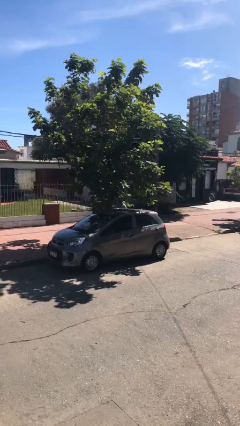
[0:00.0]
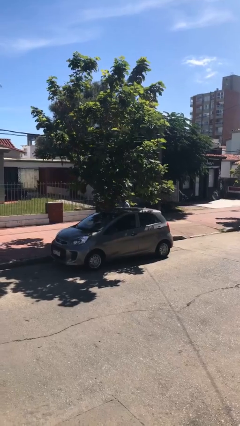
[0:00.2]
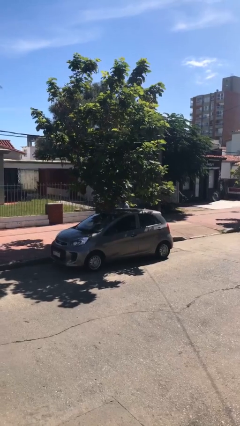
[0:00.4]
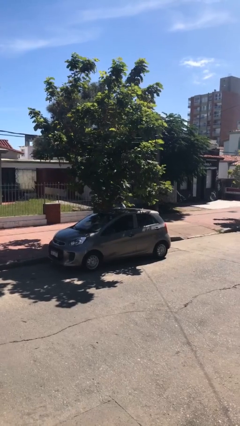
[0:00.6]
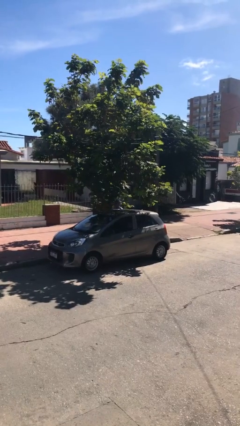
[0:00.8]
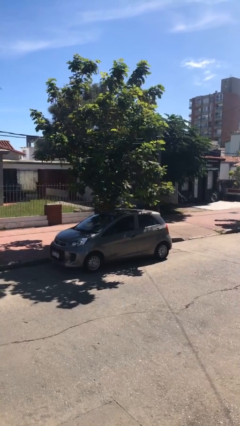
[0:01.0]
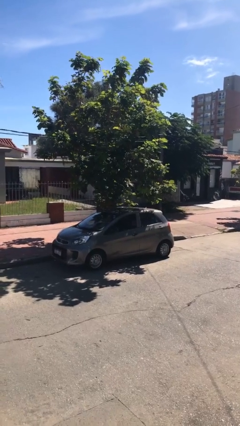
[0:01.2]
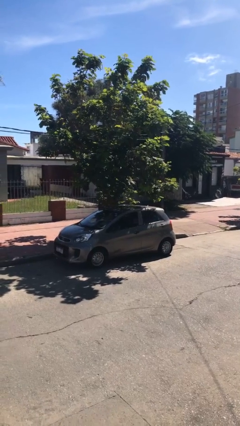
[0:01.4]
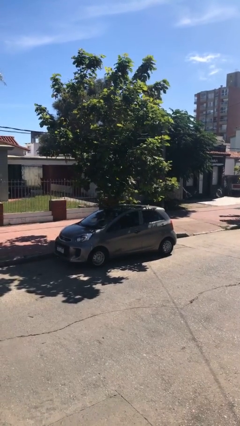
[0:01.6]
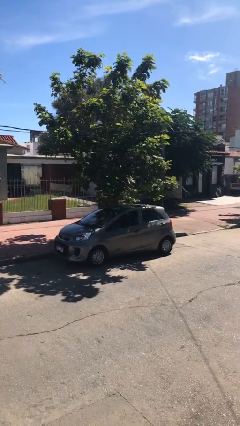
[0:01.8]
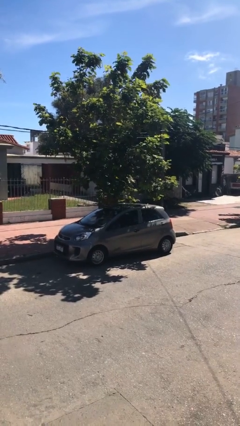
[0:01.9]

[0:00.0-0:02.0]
person enters car

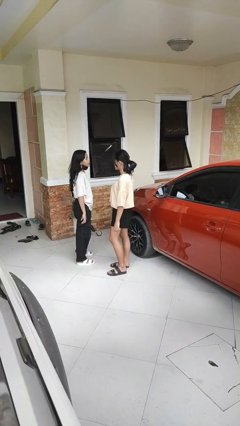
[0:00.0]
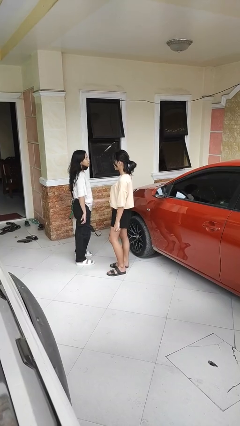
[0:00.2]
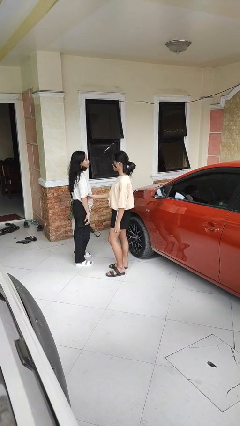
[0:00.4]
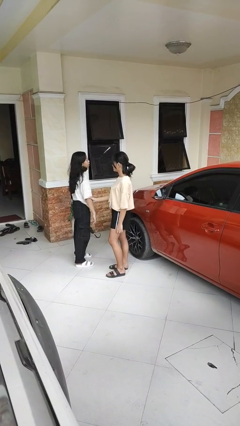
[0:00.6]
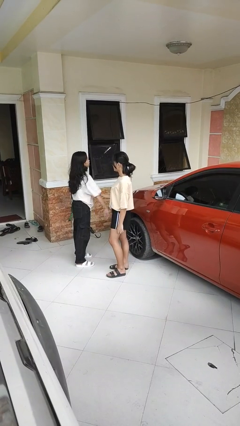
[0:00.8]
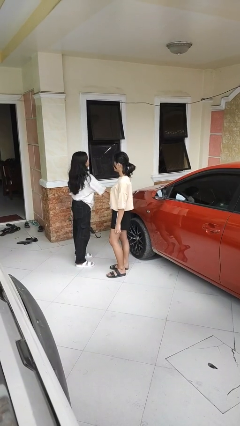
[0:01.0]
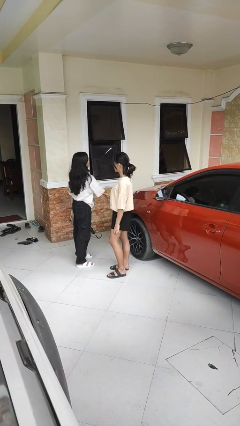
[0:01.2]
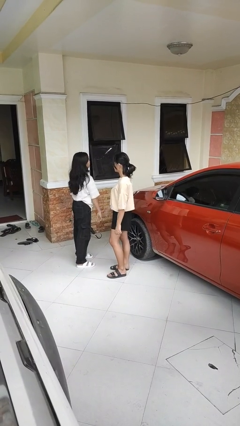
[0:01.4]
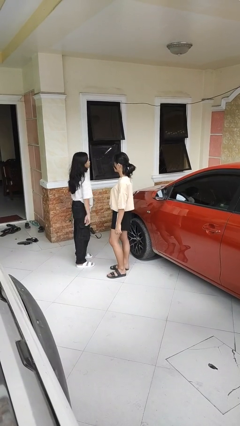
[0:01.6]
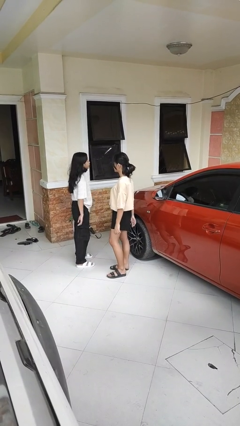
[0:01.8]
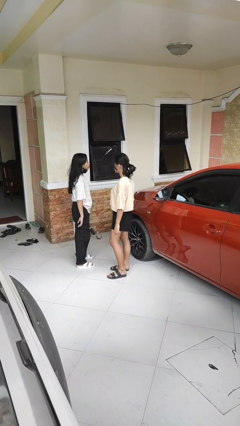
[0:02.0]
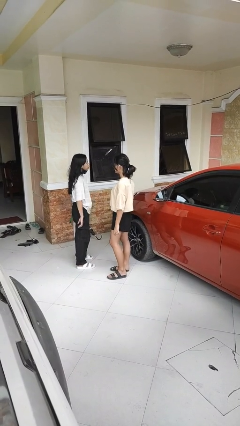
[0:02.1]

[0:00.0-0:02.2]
person grabs person by forearm

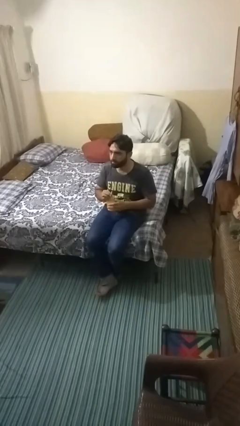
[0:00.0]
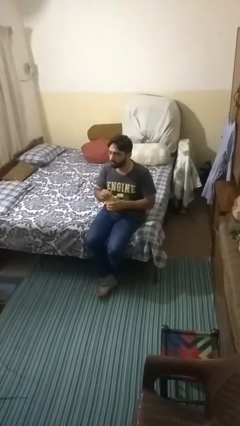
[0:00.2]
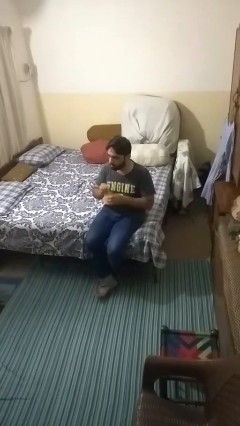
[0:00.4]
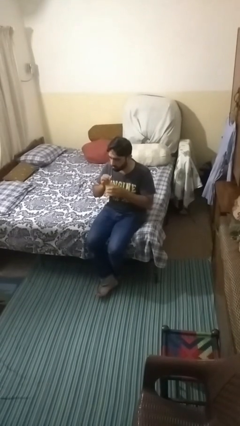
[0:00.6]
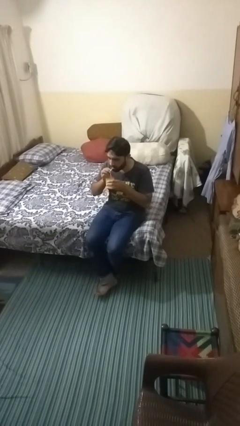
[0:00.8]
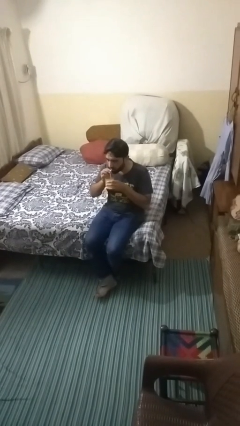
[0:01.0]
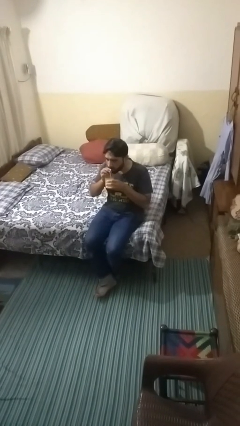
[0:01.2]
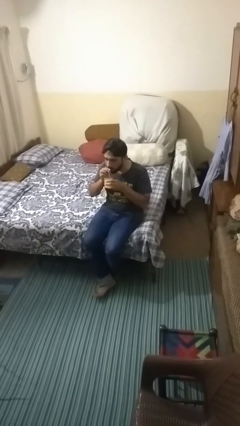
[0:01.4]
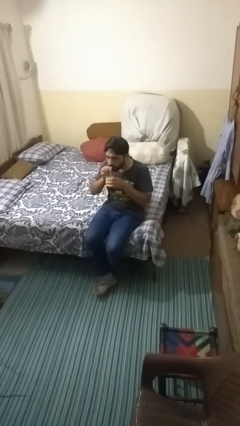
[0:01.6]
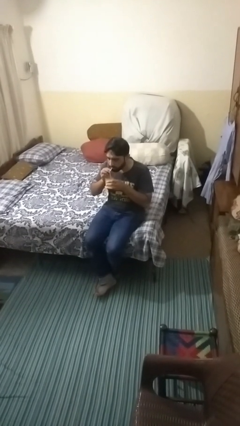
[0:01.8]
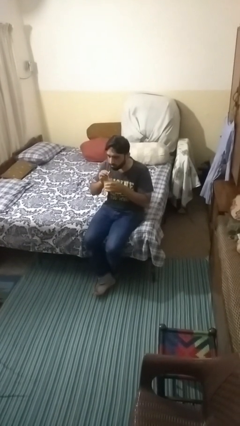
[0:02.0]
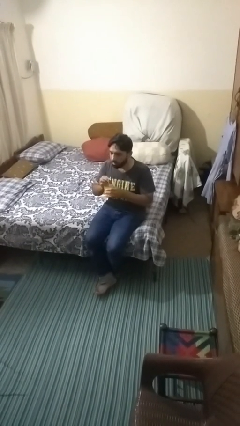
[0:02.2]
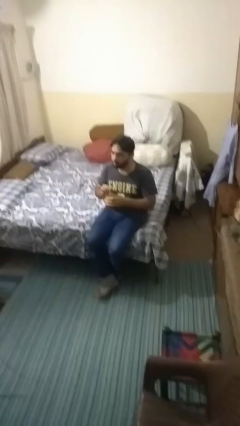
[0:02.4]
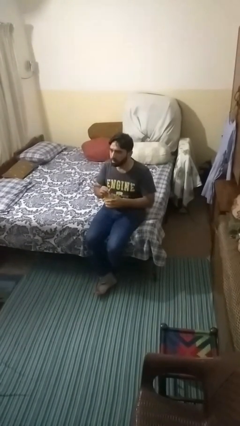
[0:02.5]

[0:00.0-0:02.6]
person drinks from straw

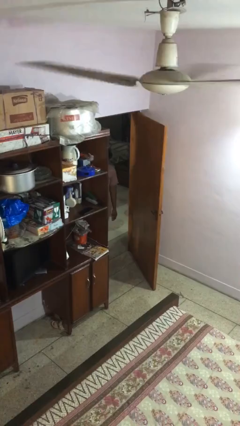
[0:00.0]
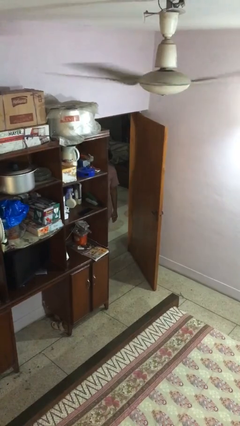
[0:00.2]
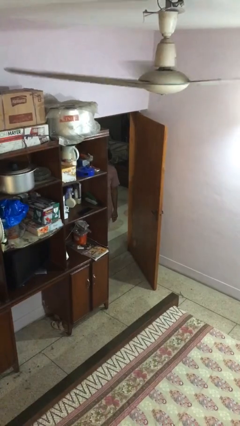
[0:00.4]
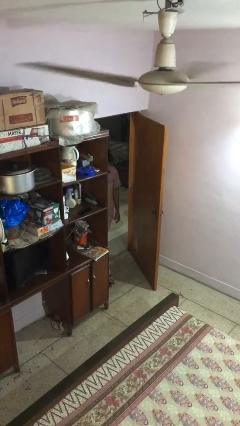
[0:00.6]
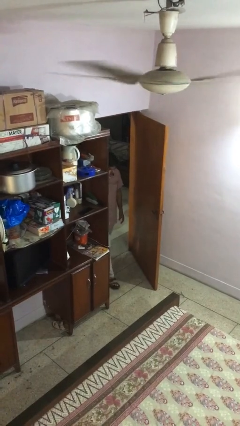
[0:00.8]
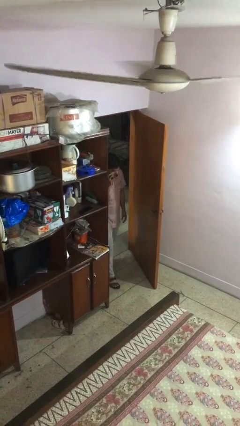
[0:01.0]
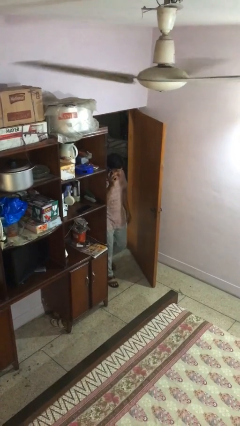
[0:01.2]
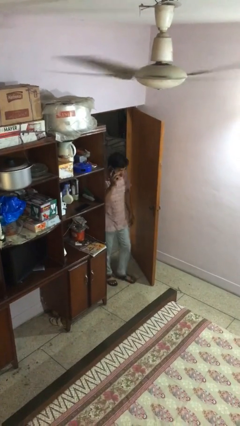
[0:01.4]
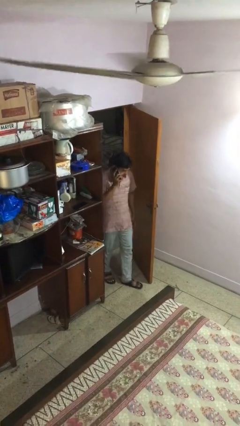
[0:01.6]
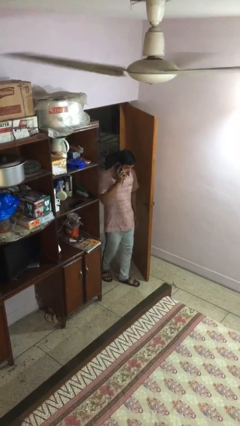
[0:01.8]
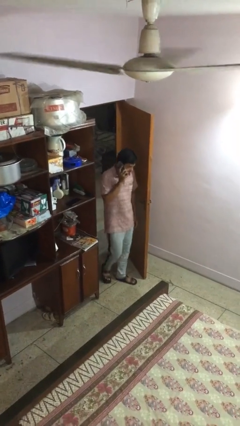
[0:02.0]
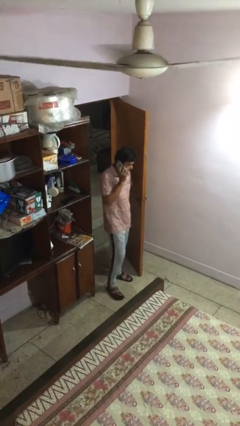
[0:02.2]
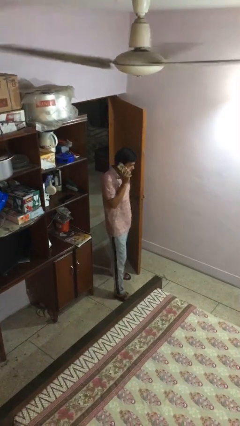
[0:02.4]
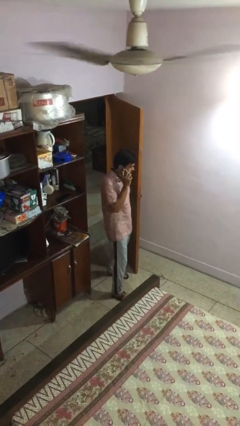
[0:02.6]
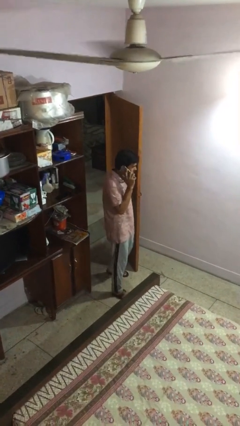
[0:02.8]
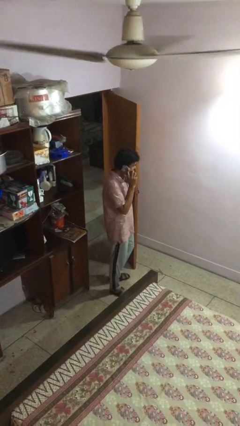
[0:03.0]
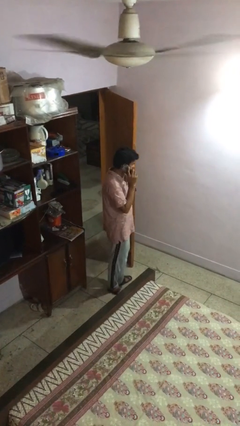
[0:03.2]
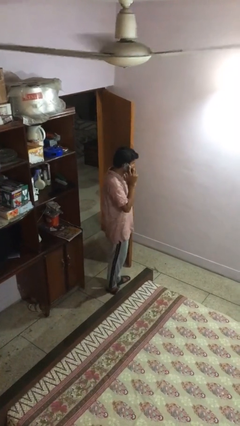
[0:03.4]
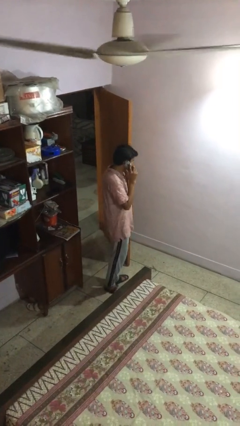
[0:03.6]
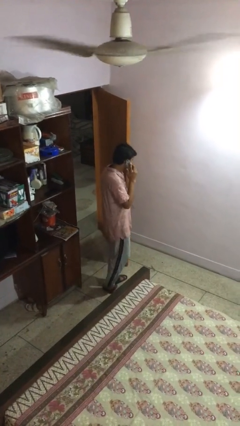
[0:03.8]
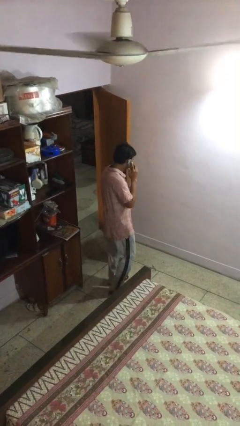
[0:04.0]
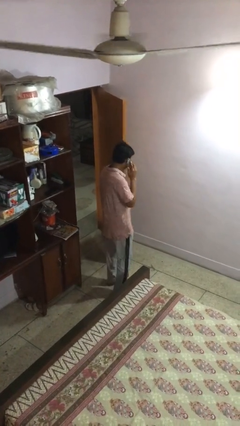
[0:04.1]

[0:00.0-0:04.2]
person enters scene through structure

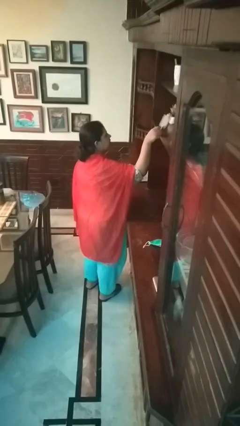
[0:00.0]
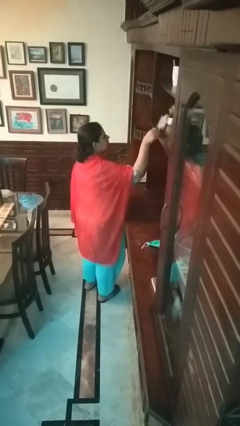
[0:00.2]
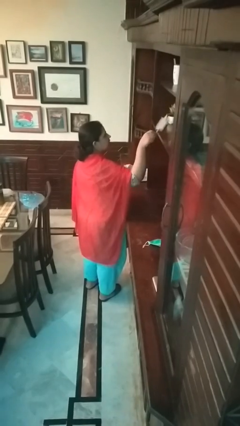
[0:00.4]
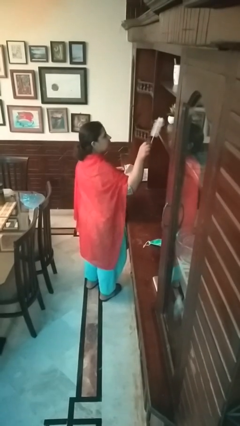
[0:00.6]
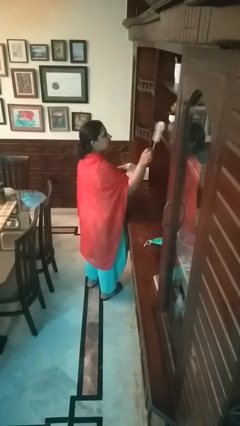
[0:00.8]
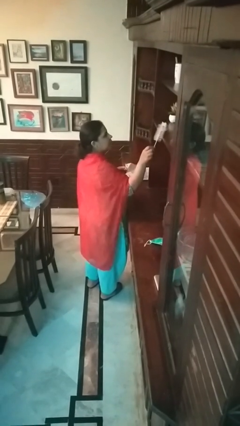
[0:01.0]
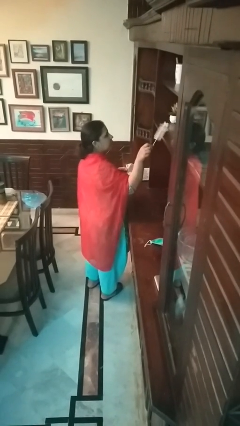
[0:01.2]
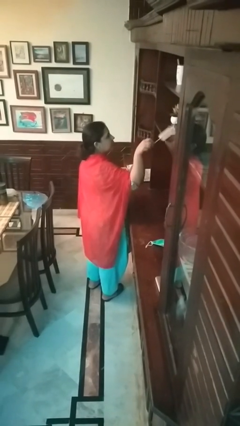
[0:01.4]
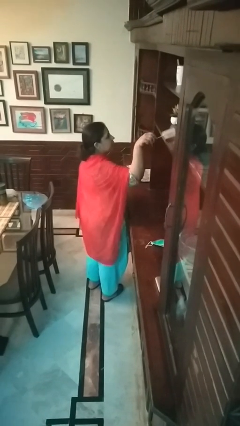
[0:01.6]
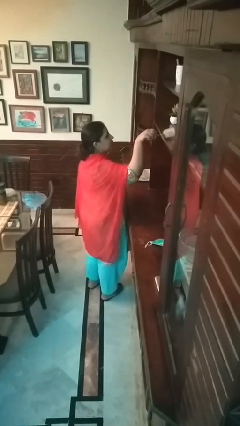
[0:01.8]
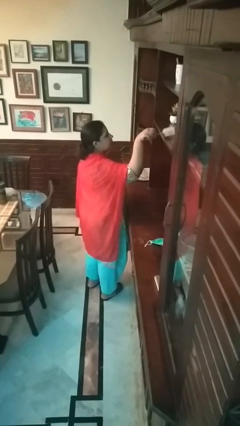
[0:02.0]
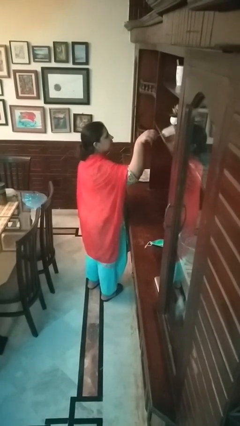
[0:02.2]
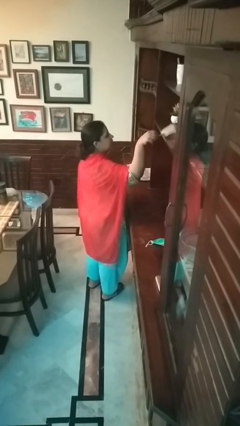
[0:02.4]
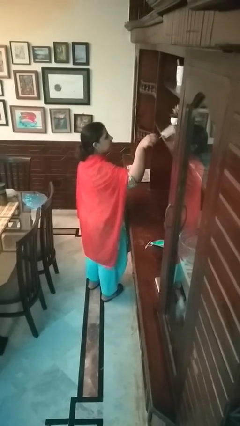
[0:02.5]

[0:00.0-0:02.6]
person dusts furniture

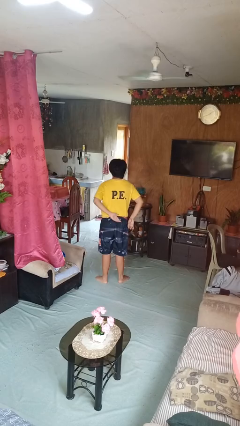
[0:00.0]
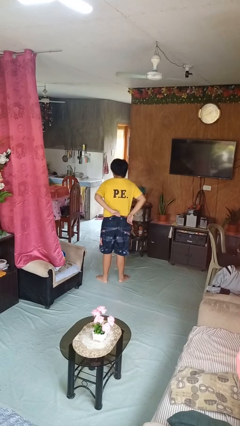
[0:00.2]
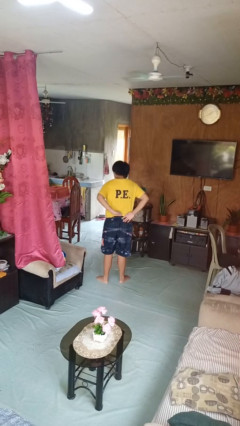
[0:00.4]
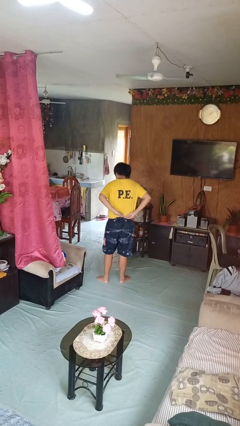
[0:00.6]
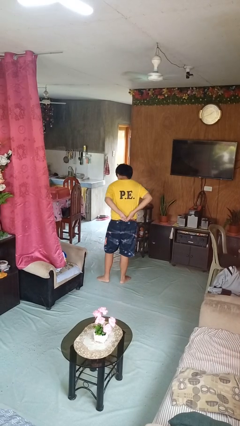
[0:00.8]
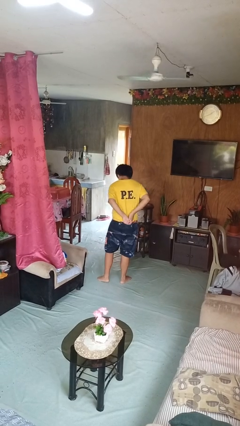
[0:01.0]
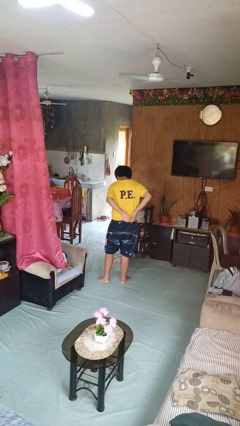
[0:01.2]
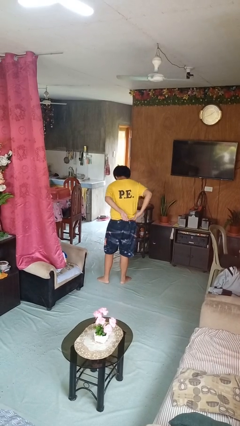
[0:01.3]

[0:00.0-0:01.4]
person untucks shirt

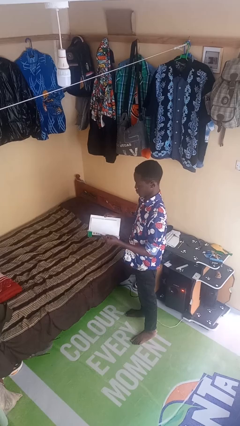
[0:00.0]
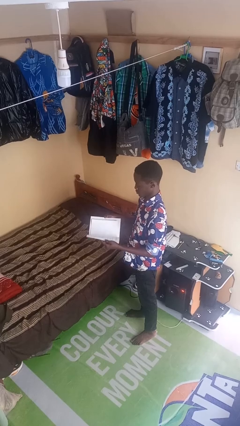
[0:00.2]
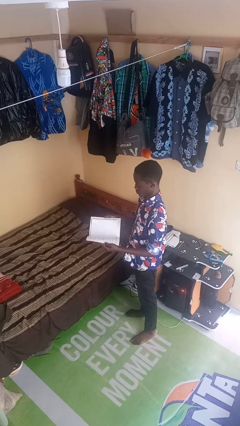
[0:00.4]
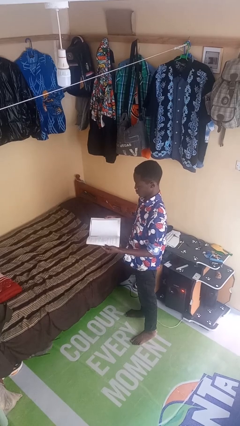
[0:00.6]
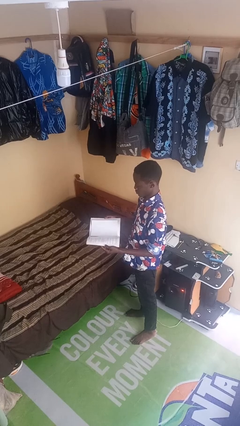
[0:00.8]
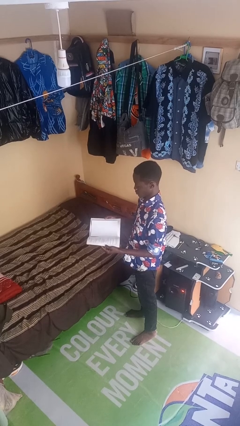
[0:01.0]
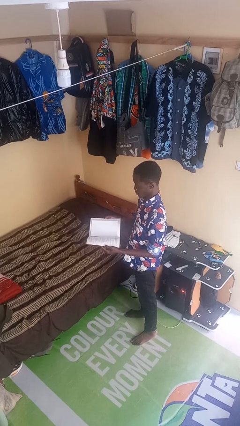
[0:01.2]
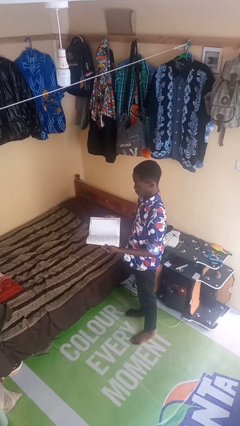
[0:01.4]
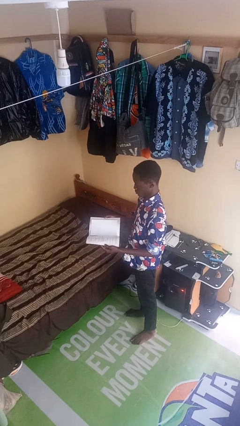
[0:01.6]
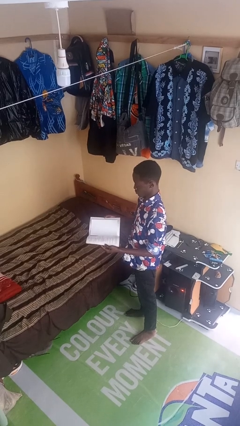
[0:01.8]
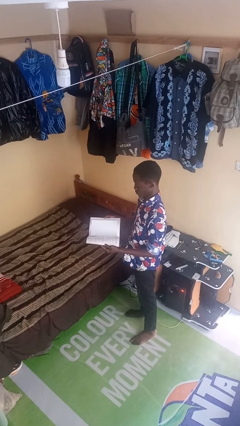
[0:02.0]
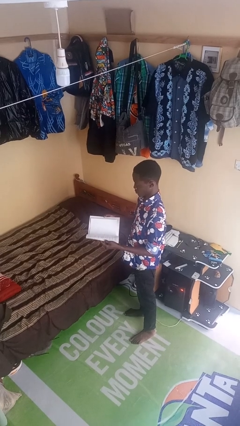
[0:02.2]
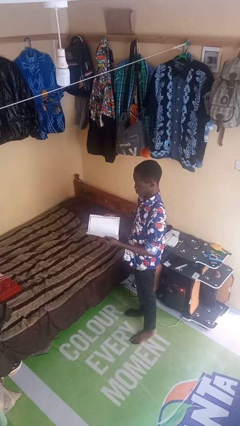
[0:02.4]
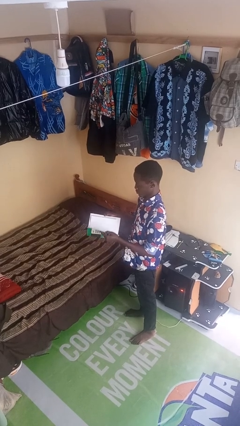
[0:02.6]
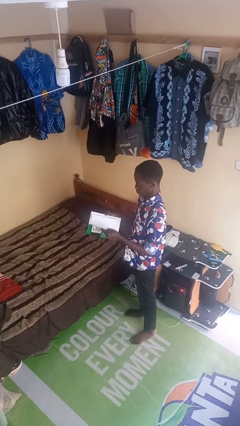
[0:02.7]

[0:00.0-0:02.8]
person reads magazine
